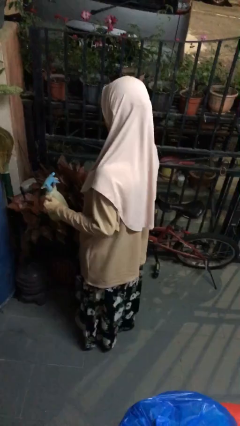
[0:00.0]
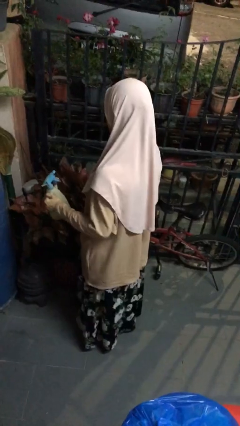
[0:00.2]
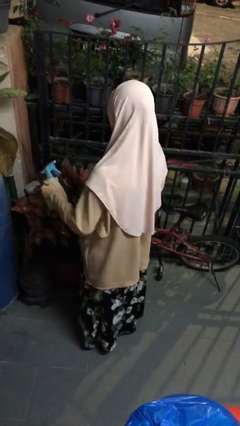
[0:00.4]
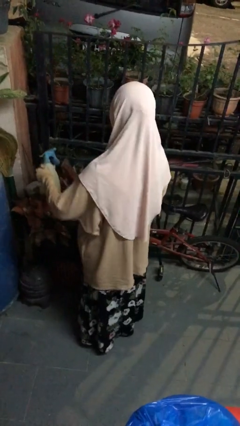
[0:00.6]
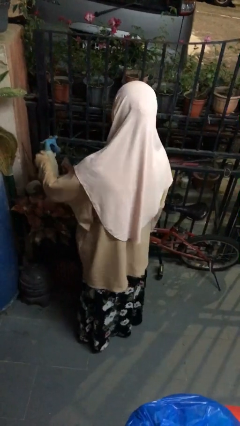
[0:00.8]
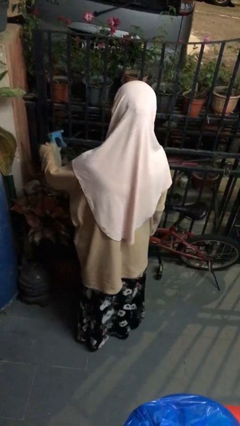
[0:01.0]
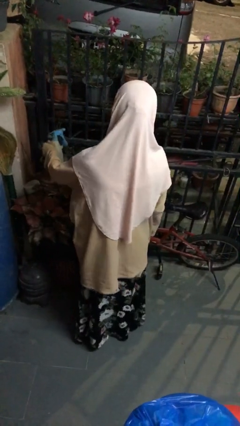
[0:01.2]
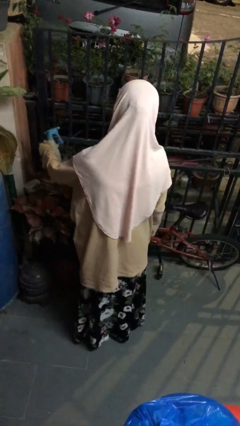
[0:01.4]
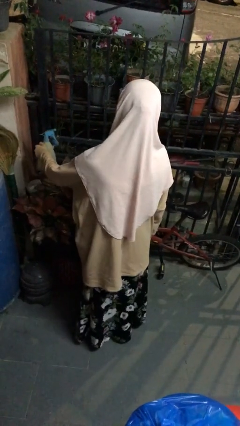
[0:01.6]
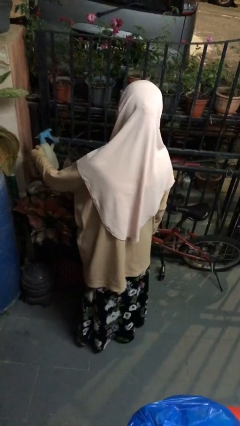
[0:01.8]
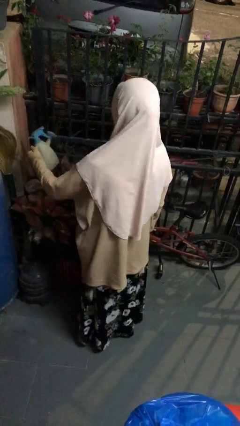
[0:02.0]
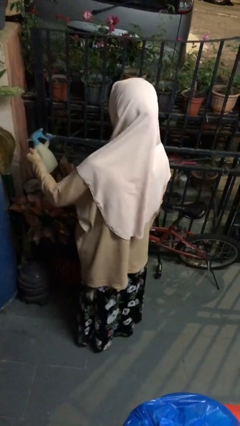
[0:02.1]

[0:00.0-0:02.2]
person waters houseplant

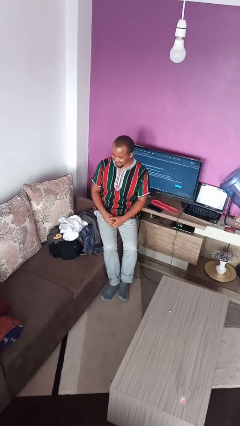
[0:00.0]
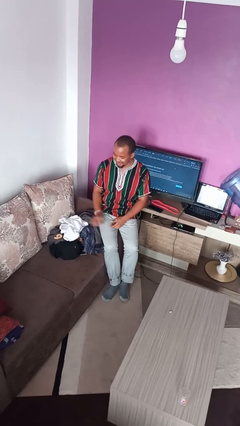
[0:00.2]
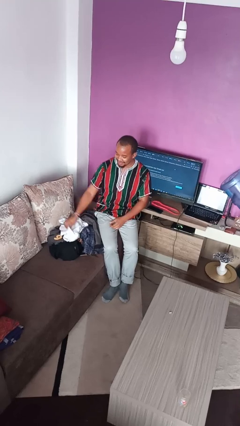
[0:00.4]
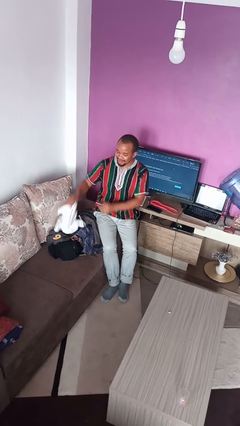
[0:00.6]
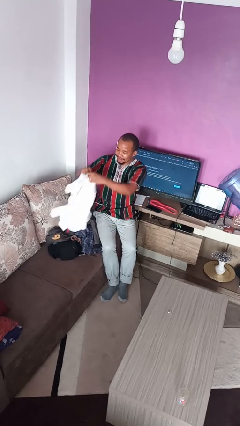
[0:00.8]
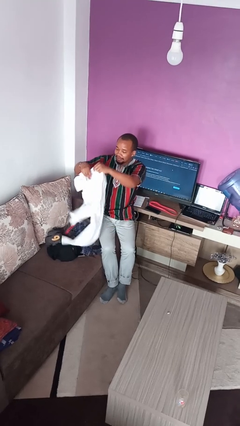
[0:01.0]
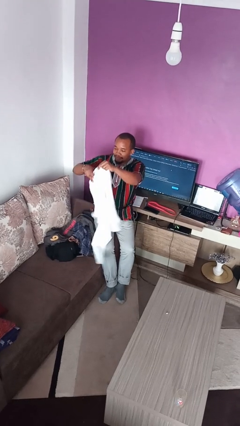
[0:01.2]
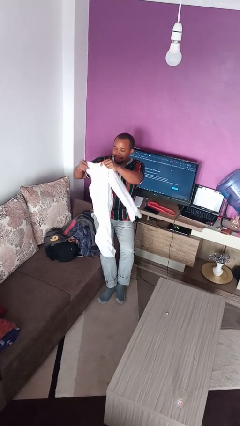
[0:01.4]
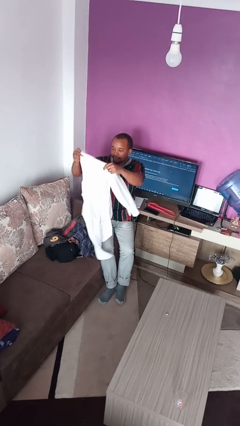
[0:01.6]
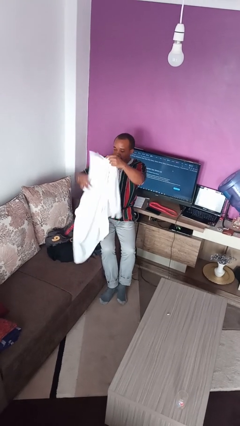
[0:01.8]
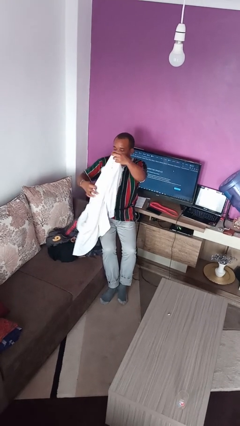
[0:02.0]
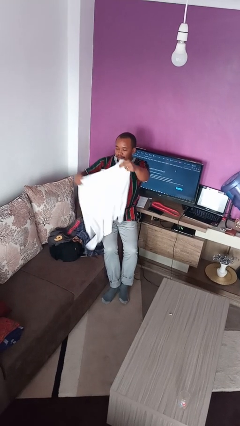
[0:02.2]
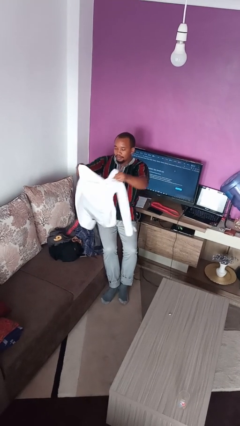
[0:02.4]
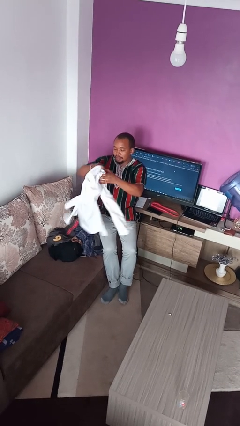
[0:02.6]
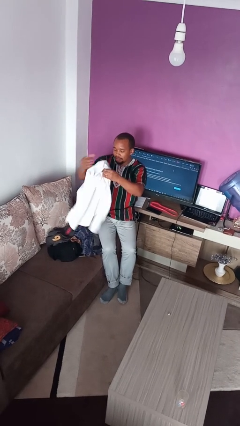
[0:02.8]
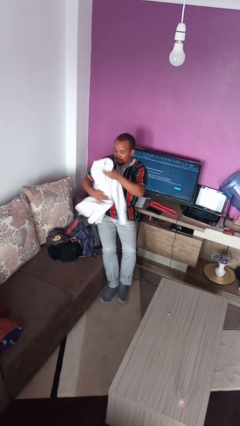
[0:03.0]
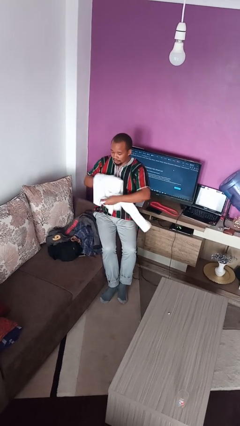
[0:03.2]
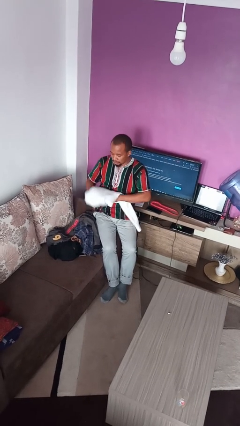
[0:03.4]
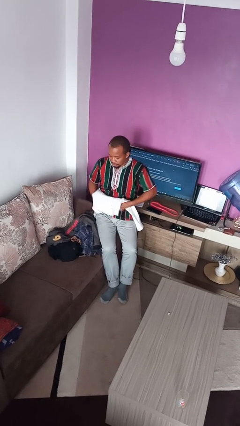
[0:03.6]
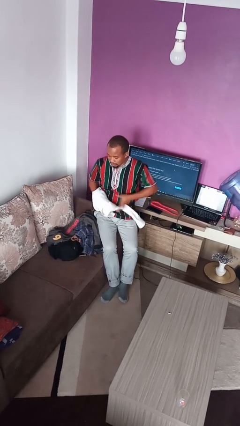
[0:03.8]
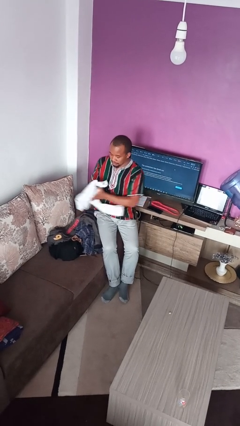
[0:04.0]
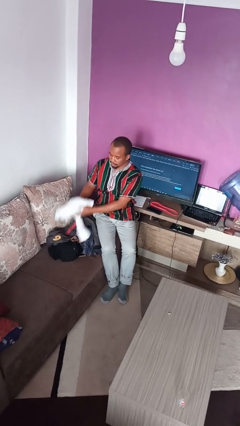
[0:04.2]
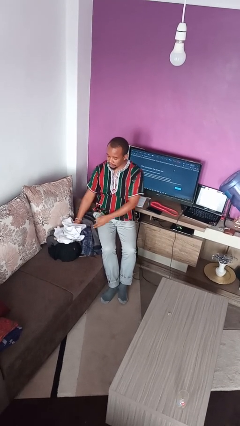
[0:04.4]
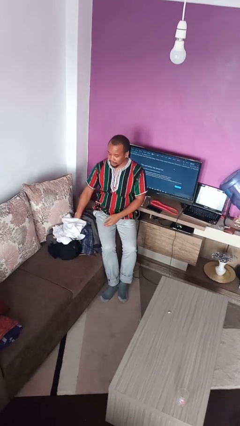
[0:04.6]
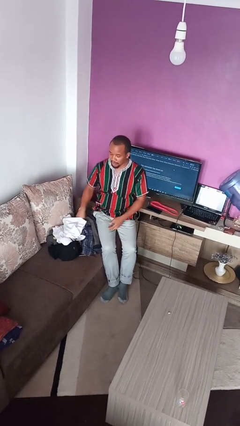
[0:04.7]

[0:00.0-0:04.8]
person folds shirt

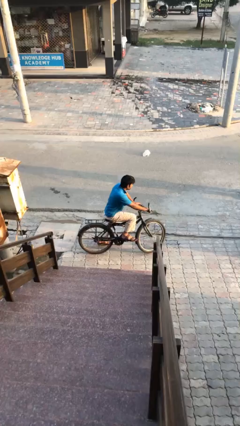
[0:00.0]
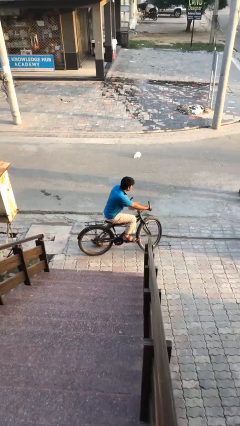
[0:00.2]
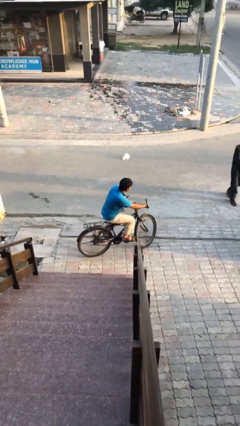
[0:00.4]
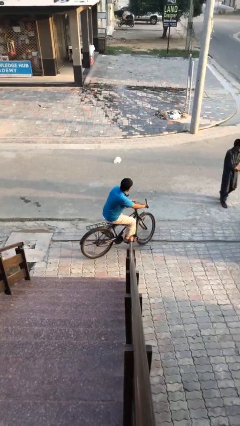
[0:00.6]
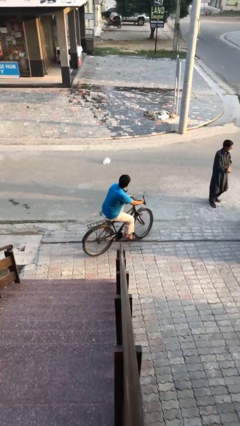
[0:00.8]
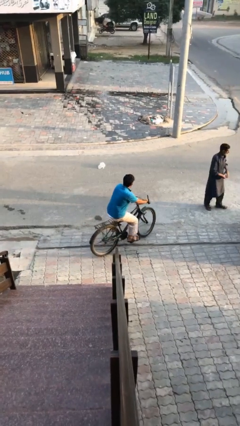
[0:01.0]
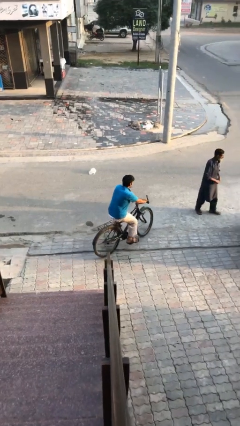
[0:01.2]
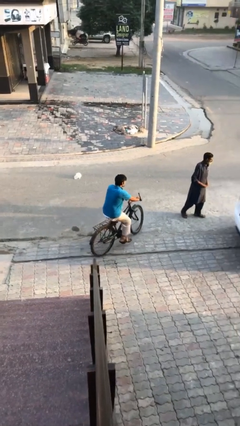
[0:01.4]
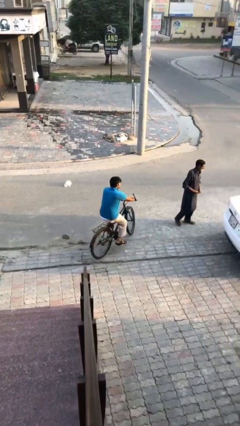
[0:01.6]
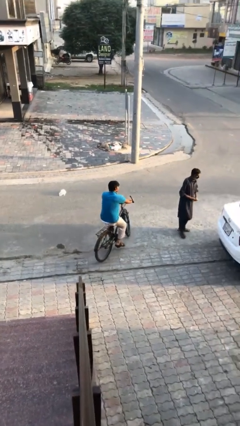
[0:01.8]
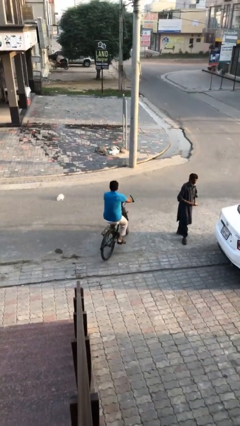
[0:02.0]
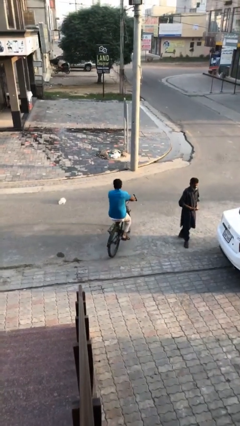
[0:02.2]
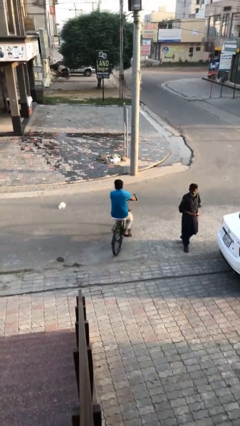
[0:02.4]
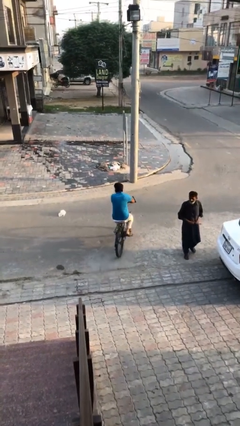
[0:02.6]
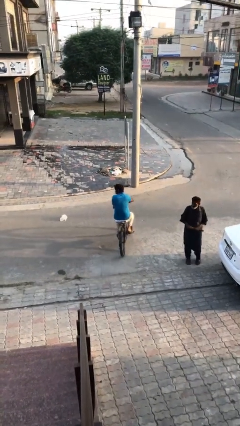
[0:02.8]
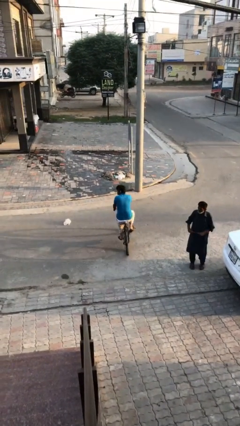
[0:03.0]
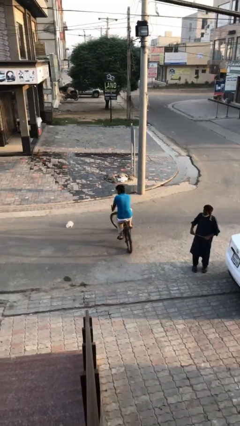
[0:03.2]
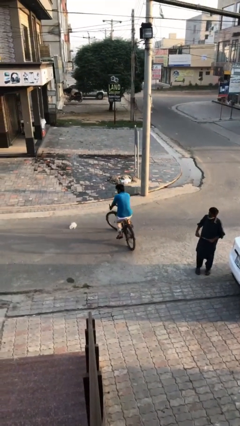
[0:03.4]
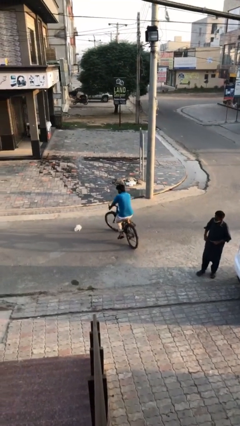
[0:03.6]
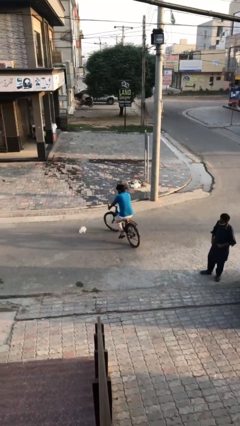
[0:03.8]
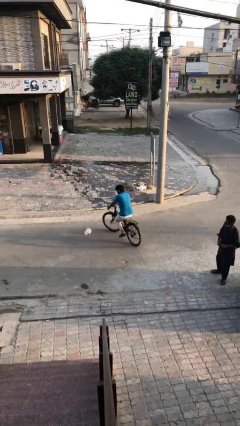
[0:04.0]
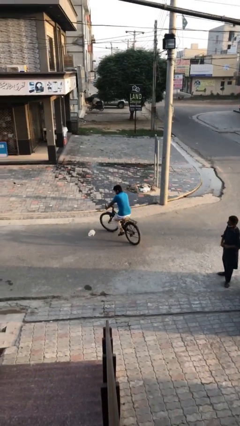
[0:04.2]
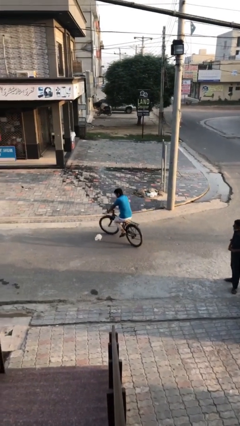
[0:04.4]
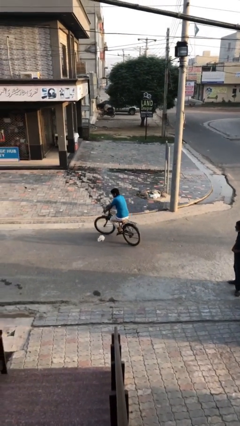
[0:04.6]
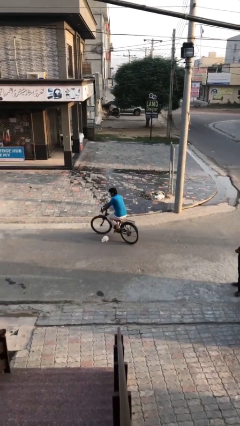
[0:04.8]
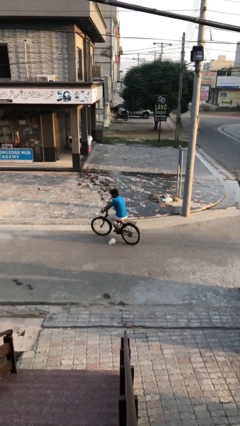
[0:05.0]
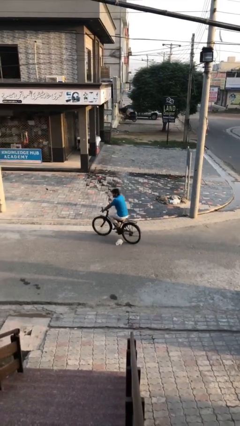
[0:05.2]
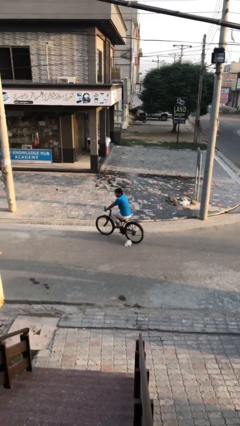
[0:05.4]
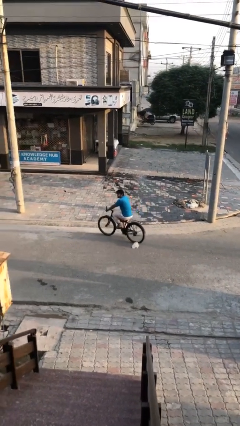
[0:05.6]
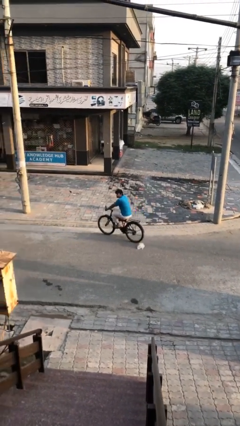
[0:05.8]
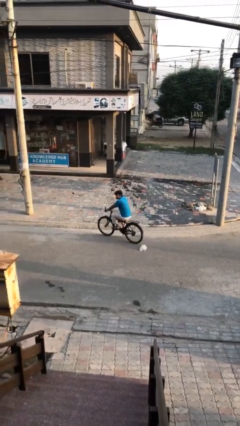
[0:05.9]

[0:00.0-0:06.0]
person rides bicycle

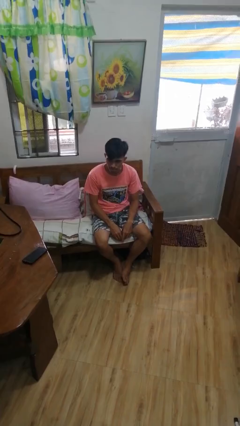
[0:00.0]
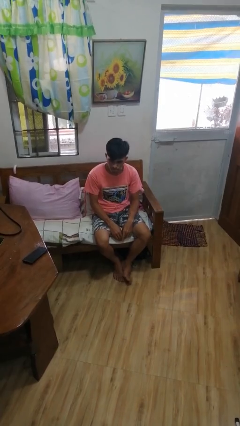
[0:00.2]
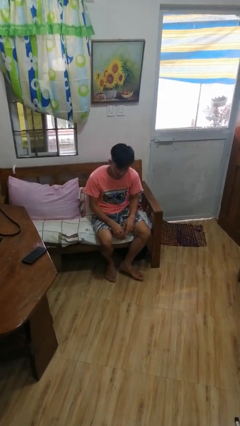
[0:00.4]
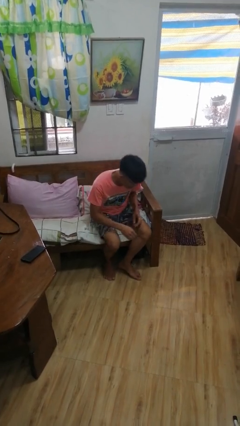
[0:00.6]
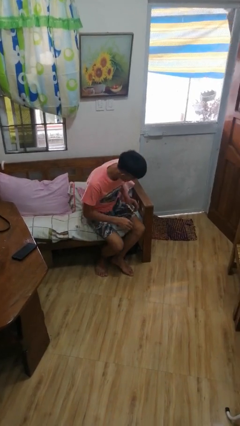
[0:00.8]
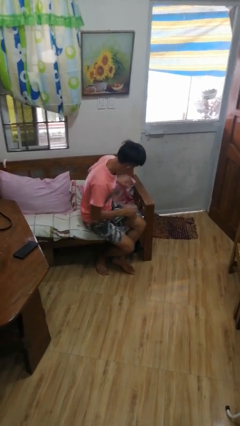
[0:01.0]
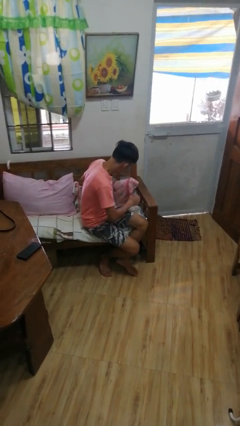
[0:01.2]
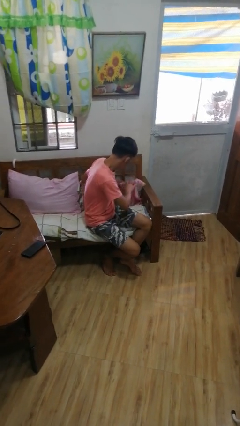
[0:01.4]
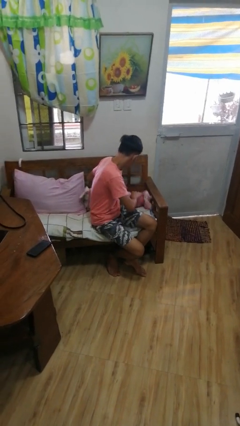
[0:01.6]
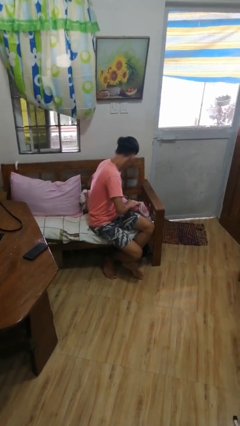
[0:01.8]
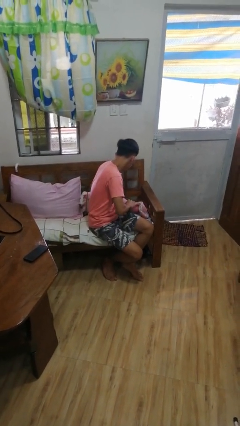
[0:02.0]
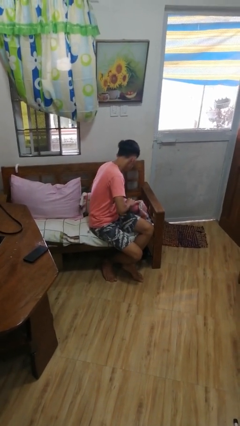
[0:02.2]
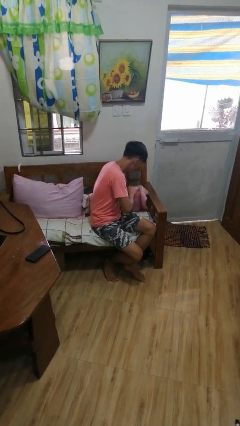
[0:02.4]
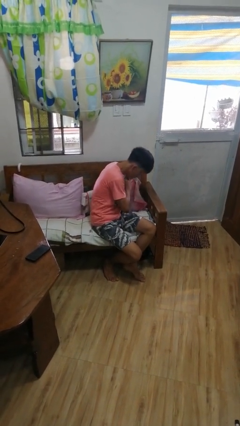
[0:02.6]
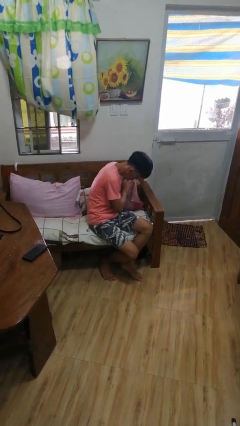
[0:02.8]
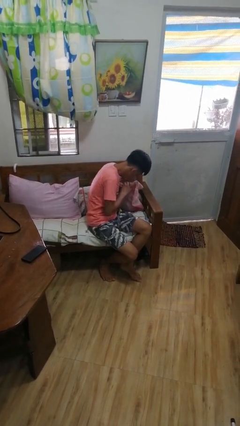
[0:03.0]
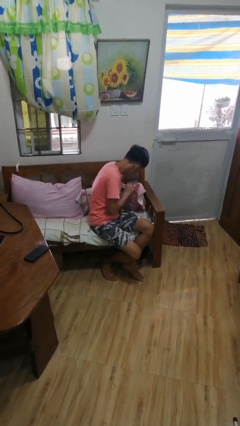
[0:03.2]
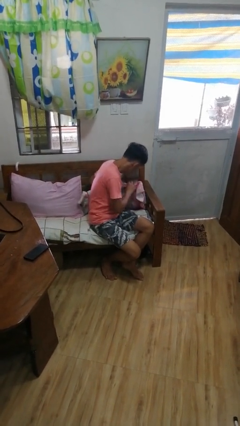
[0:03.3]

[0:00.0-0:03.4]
person searches in couch

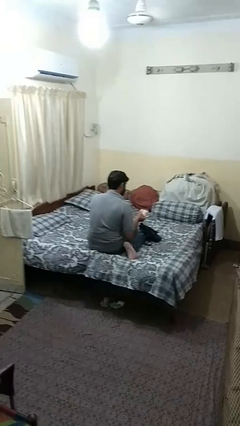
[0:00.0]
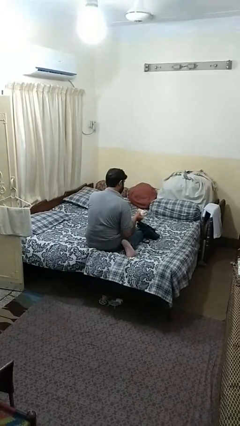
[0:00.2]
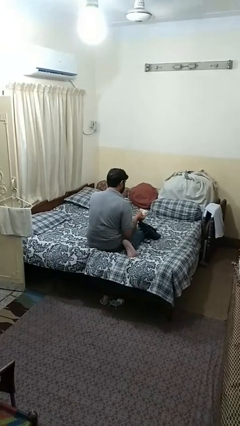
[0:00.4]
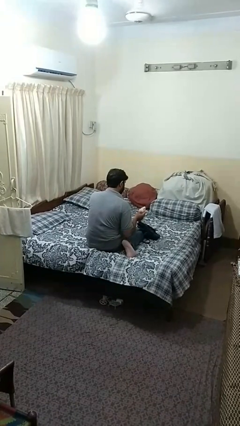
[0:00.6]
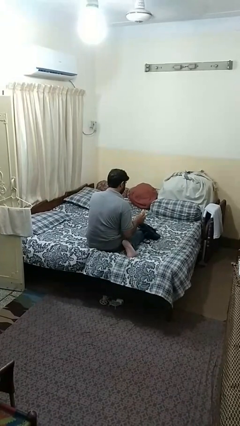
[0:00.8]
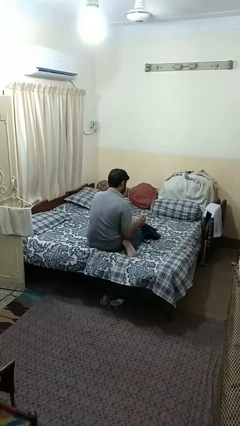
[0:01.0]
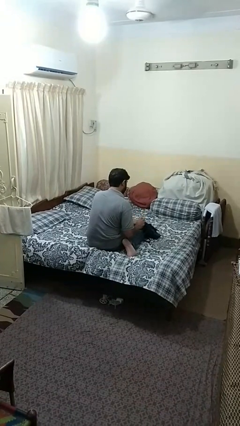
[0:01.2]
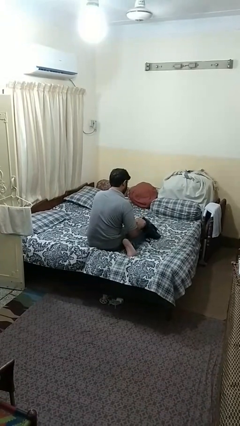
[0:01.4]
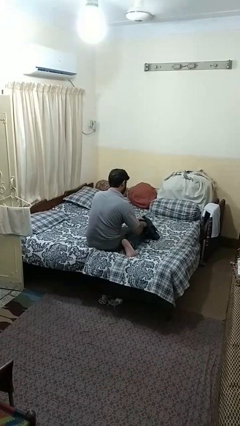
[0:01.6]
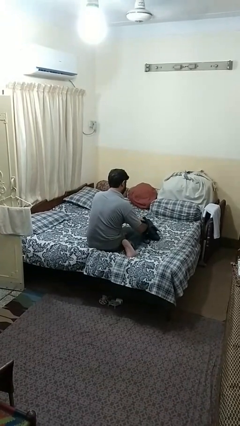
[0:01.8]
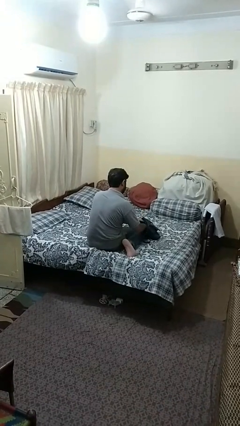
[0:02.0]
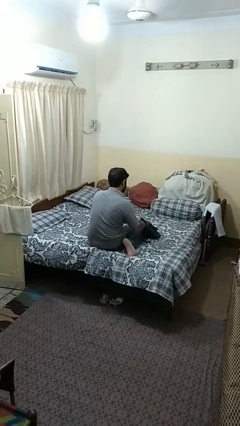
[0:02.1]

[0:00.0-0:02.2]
person puts object into purse
